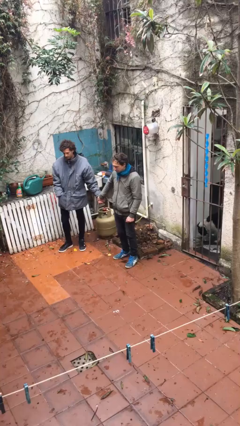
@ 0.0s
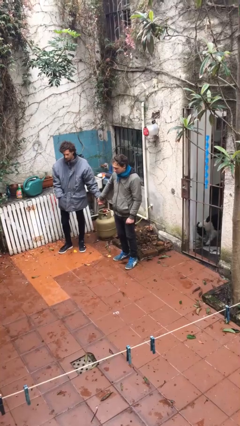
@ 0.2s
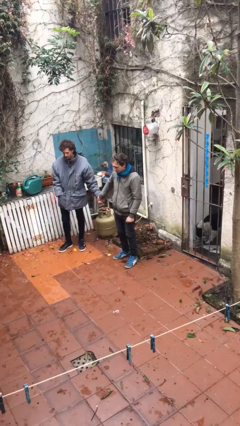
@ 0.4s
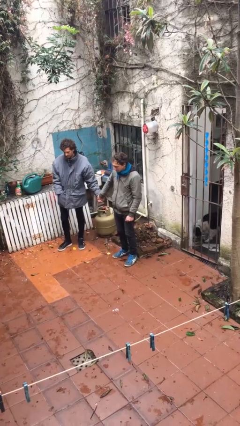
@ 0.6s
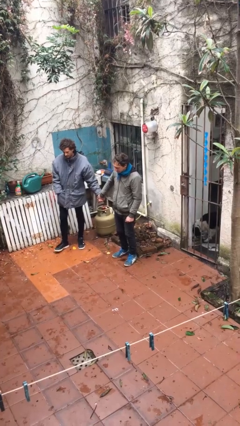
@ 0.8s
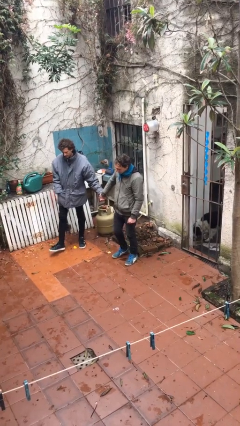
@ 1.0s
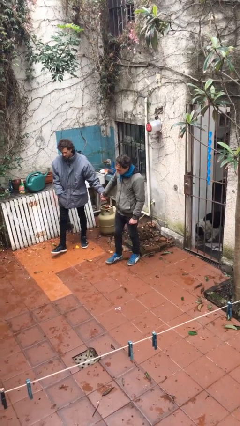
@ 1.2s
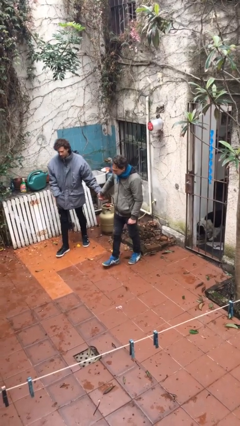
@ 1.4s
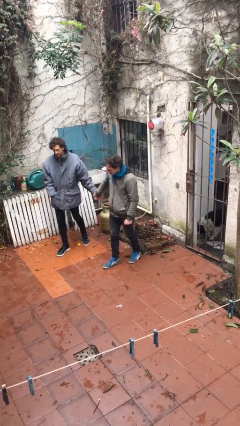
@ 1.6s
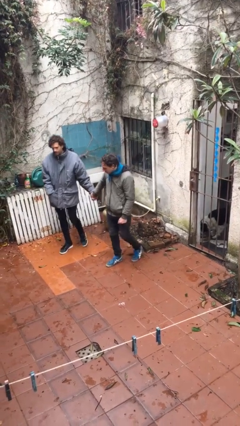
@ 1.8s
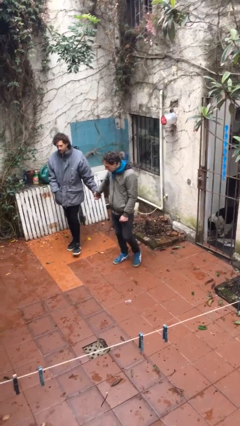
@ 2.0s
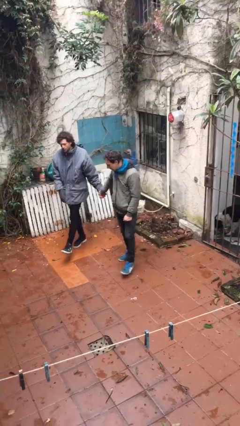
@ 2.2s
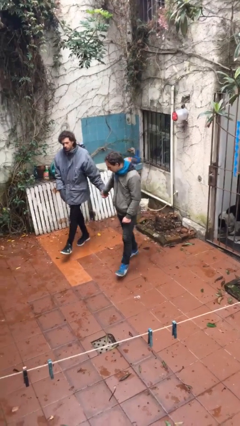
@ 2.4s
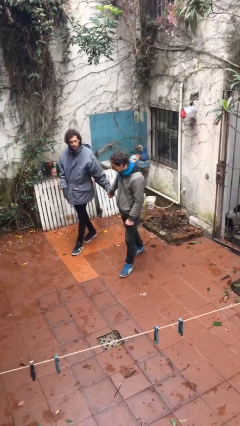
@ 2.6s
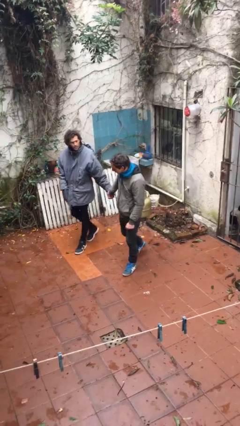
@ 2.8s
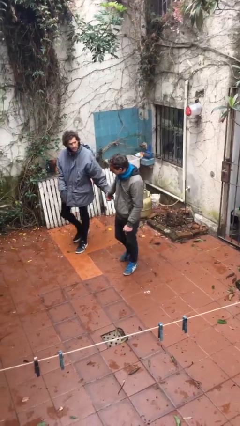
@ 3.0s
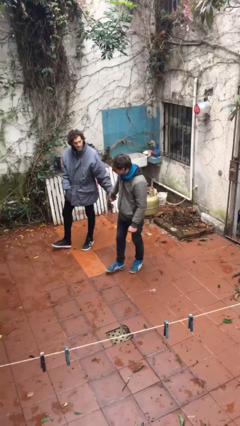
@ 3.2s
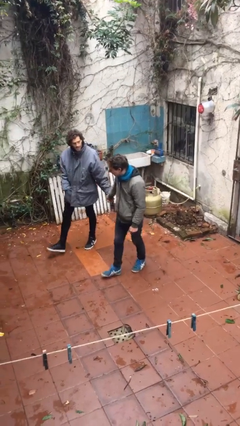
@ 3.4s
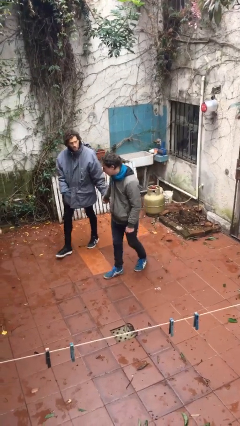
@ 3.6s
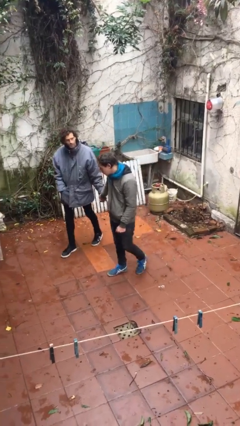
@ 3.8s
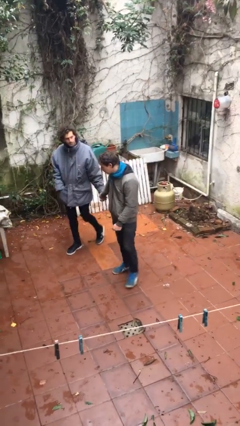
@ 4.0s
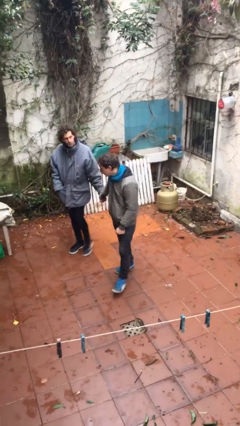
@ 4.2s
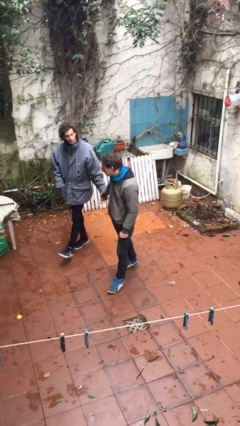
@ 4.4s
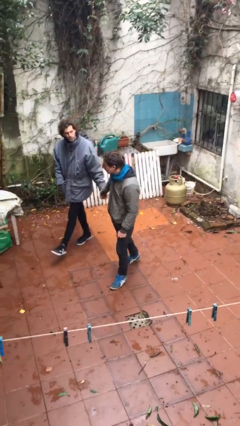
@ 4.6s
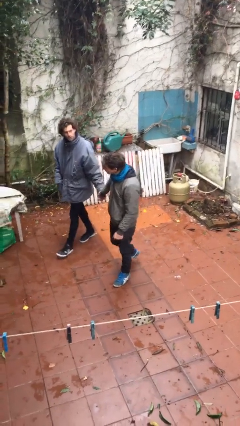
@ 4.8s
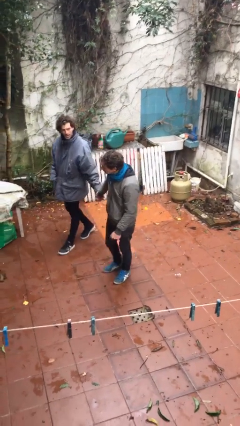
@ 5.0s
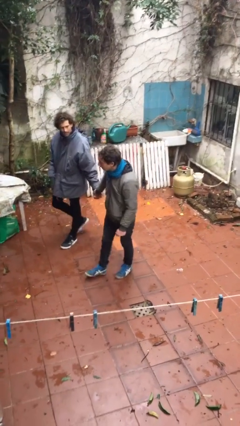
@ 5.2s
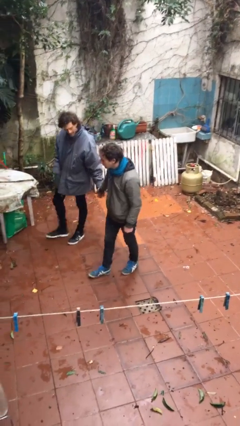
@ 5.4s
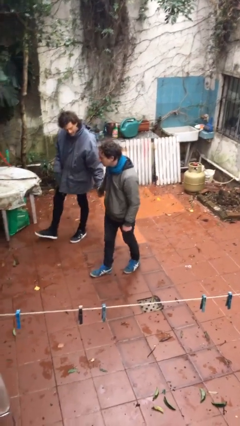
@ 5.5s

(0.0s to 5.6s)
person holds hand

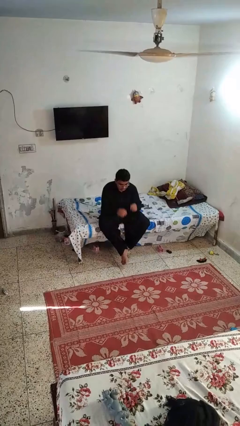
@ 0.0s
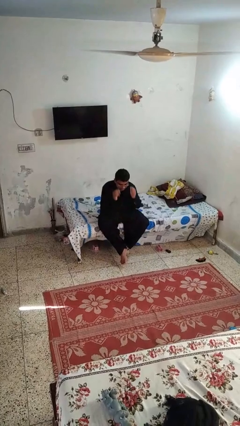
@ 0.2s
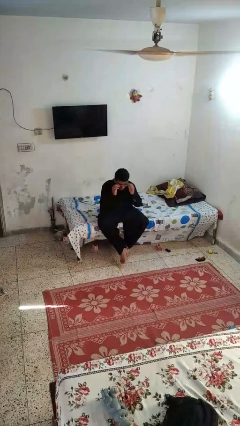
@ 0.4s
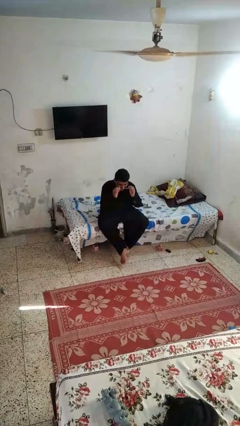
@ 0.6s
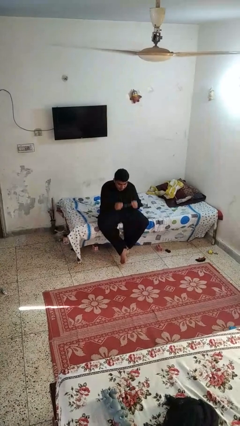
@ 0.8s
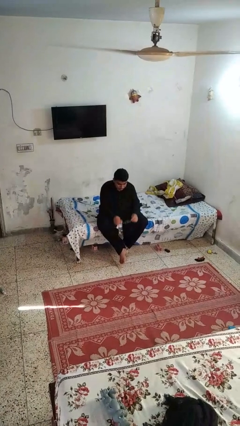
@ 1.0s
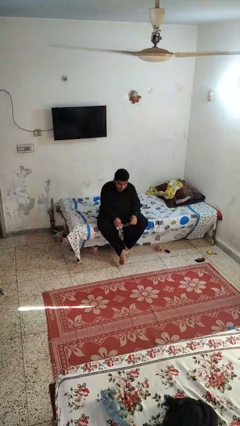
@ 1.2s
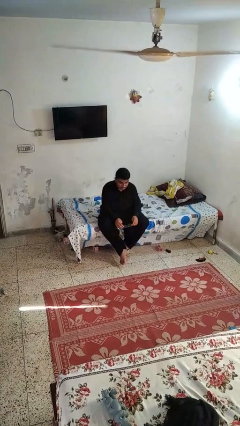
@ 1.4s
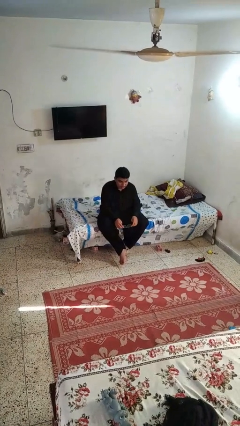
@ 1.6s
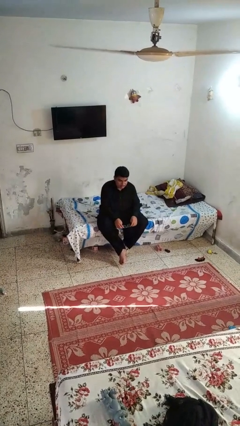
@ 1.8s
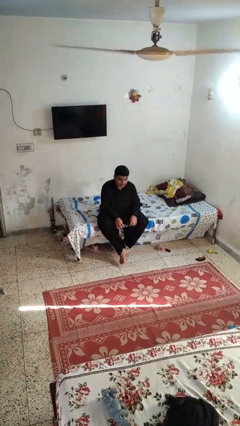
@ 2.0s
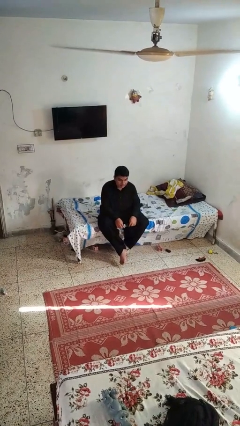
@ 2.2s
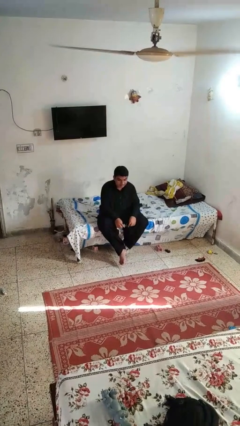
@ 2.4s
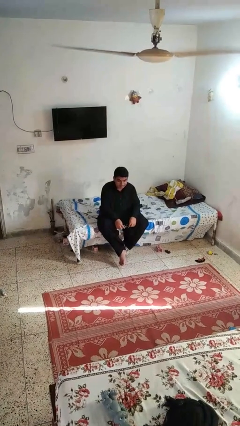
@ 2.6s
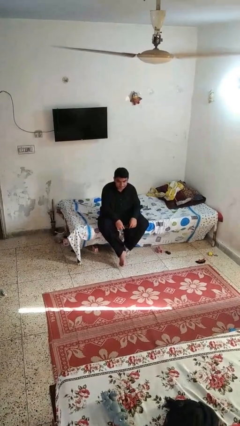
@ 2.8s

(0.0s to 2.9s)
person takes off glasses

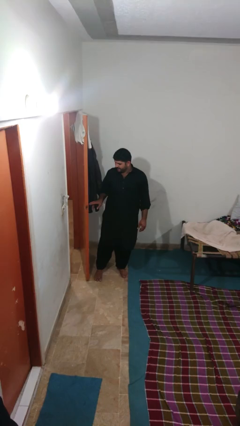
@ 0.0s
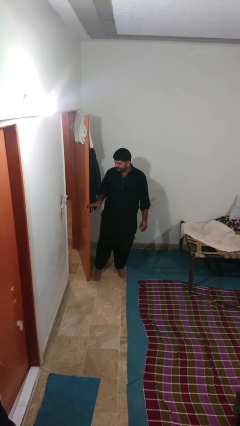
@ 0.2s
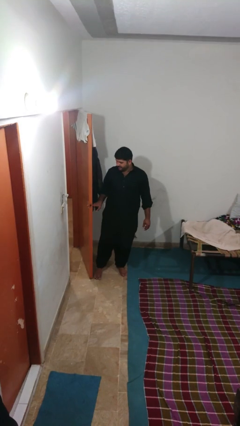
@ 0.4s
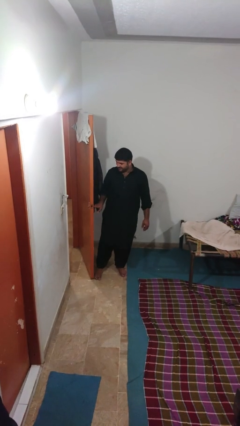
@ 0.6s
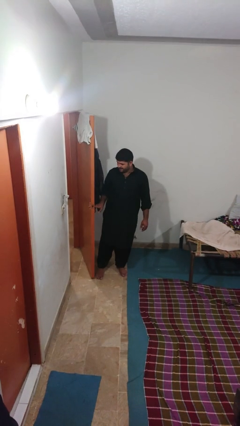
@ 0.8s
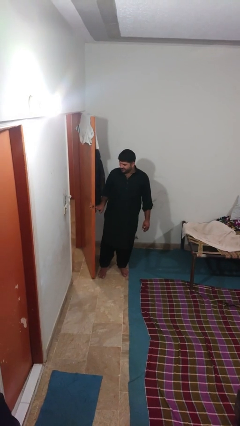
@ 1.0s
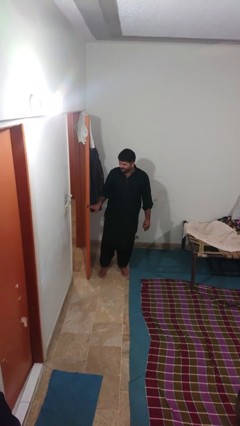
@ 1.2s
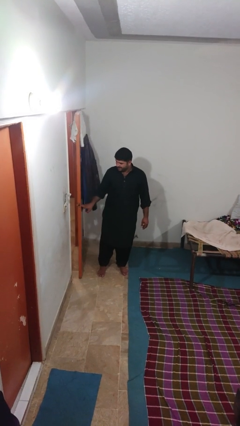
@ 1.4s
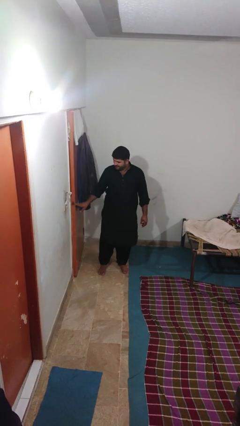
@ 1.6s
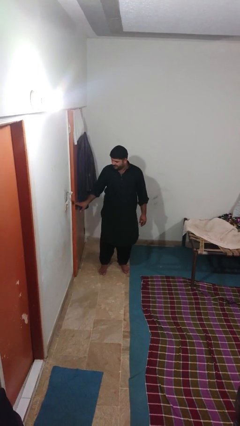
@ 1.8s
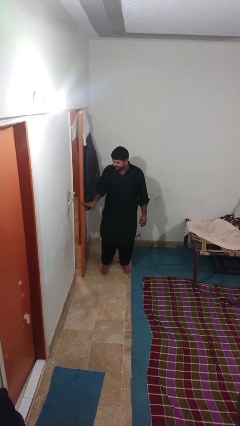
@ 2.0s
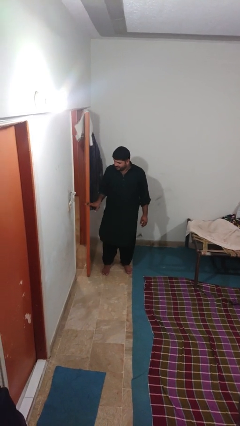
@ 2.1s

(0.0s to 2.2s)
person opens facility door

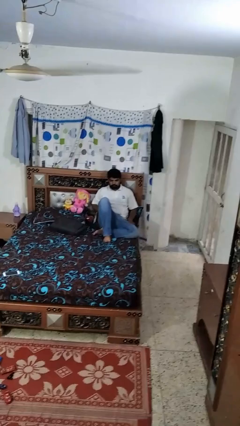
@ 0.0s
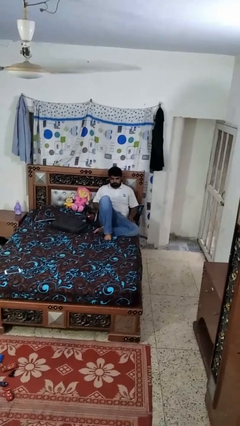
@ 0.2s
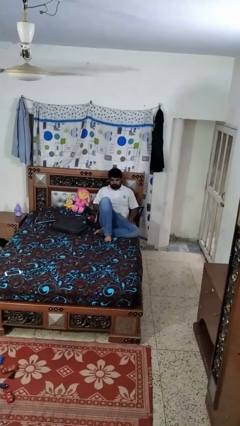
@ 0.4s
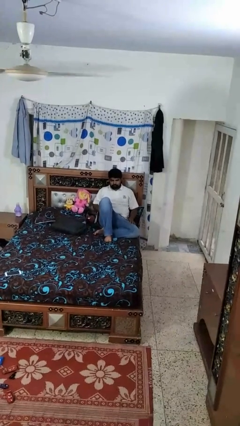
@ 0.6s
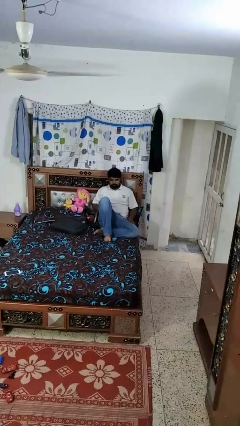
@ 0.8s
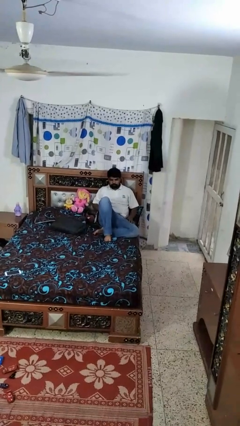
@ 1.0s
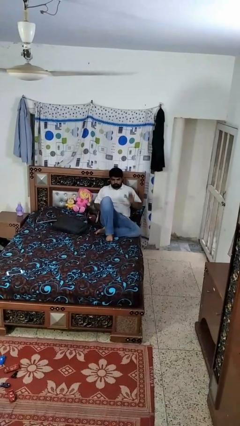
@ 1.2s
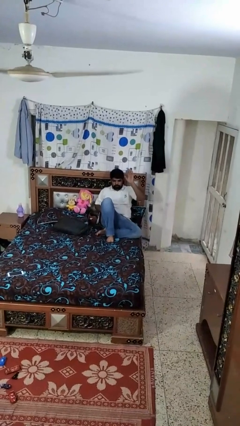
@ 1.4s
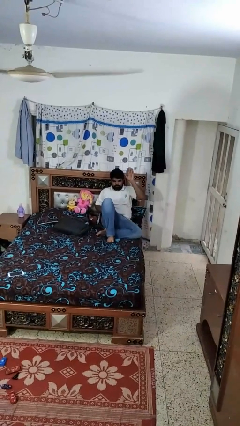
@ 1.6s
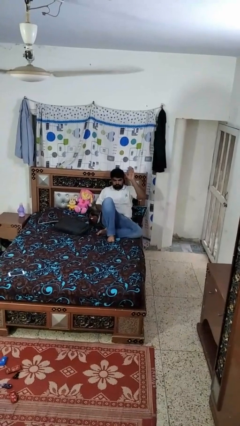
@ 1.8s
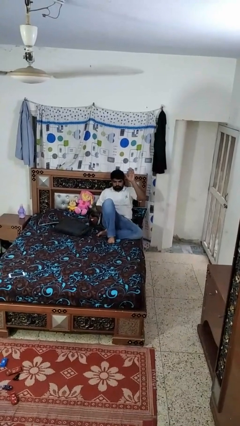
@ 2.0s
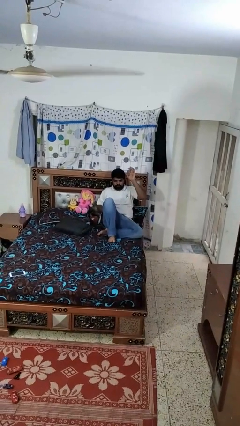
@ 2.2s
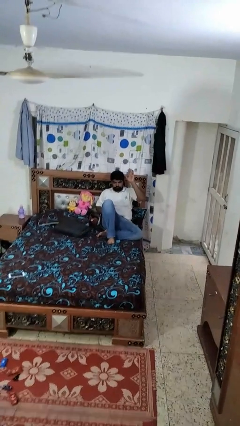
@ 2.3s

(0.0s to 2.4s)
person gestures raise hand

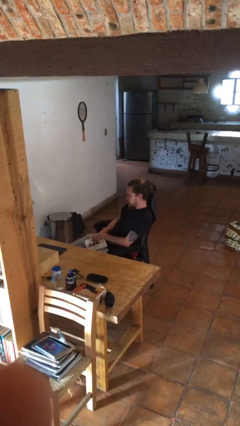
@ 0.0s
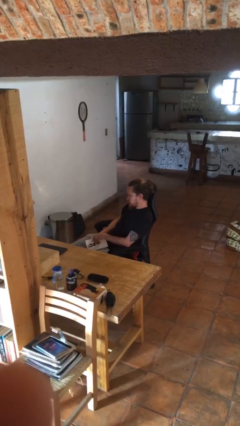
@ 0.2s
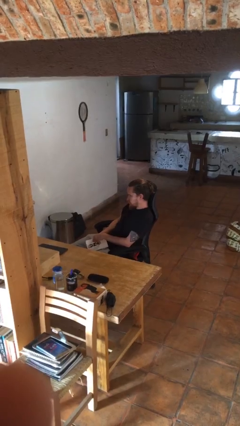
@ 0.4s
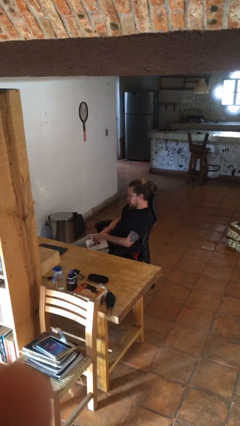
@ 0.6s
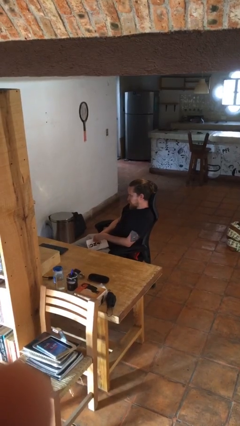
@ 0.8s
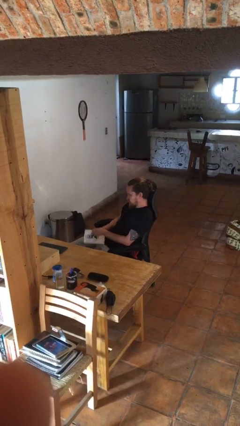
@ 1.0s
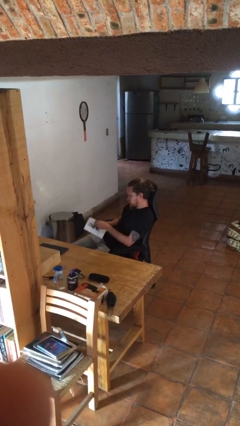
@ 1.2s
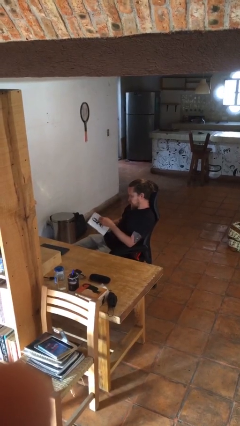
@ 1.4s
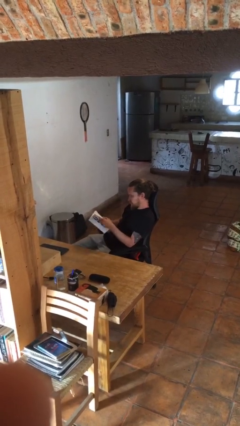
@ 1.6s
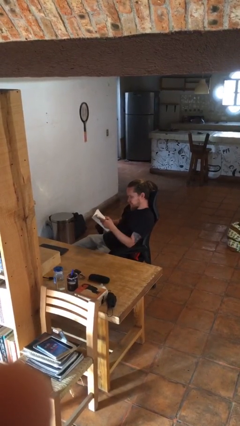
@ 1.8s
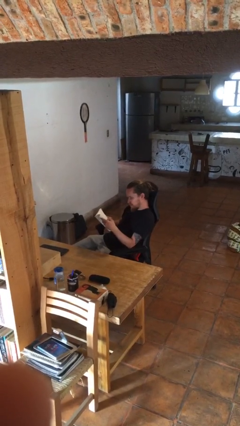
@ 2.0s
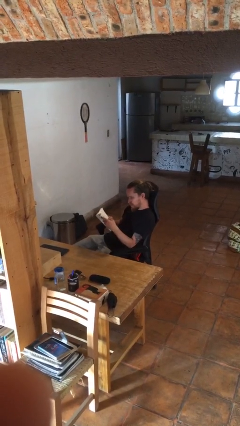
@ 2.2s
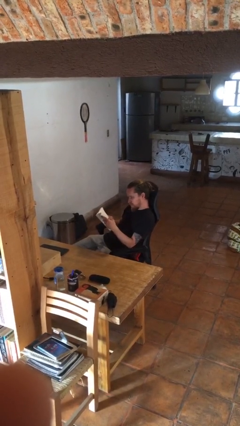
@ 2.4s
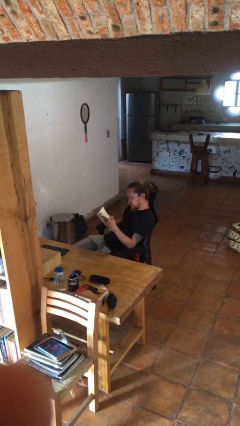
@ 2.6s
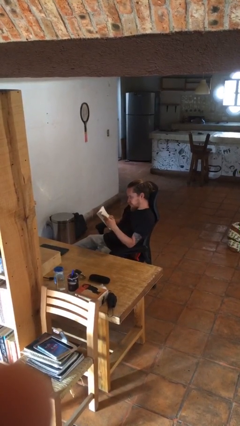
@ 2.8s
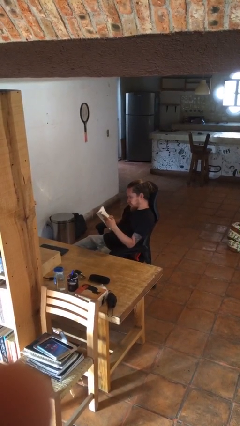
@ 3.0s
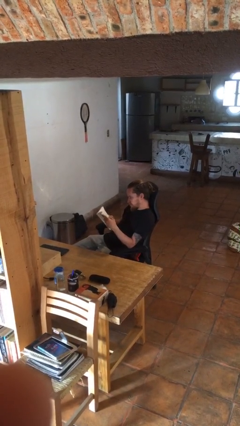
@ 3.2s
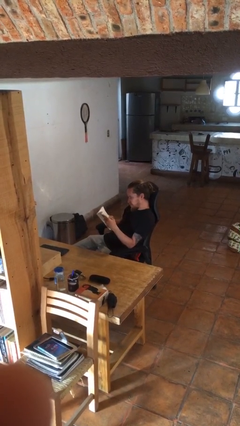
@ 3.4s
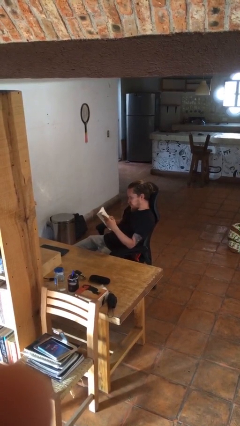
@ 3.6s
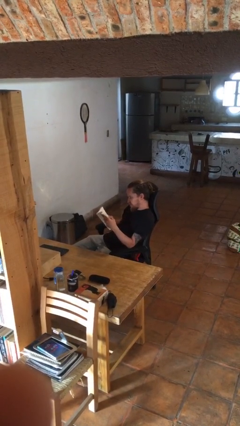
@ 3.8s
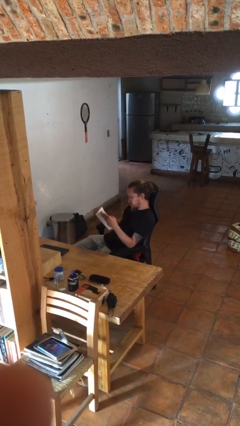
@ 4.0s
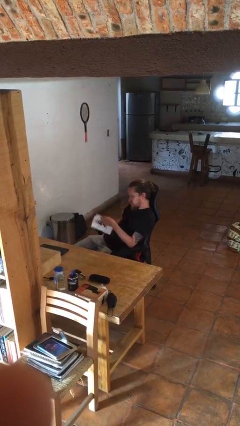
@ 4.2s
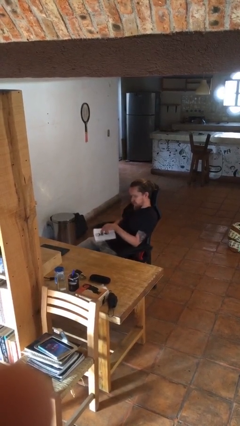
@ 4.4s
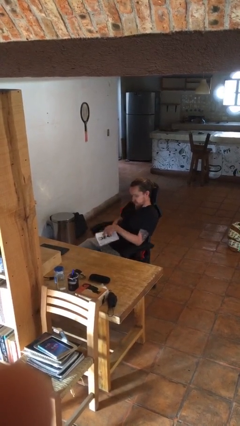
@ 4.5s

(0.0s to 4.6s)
person reads book
